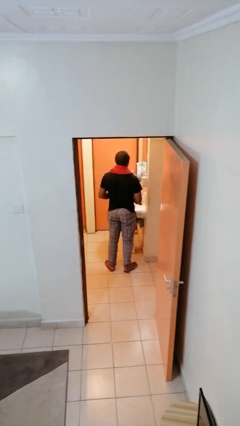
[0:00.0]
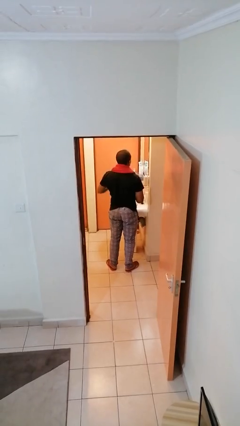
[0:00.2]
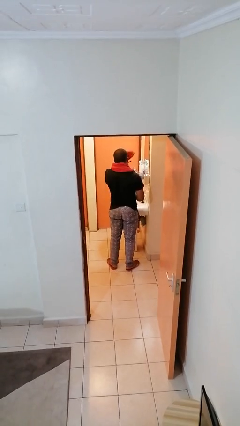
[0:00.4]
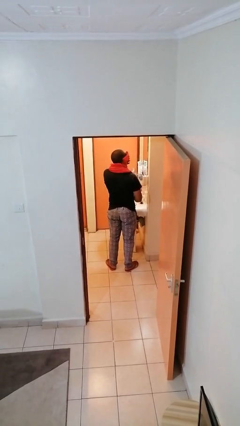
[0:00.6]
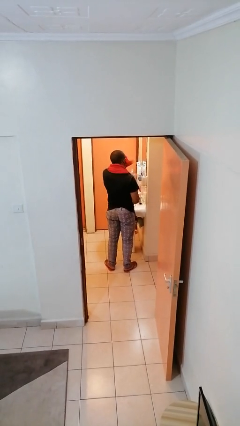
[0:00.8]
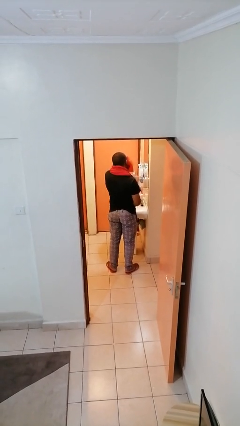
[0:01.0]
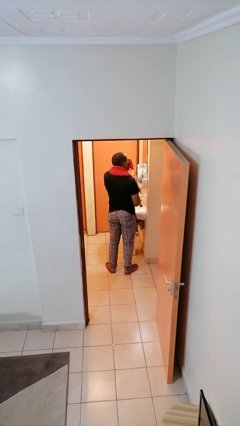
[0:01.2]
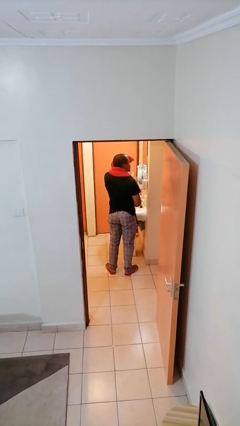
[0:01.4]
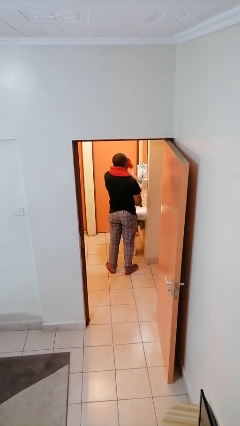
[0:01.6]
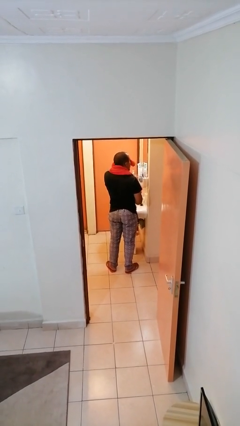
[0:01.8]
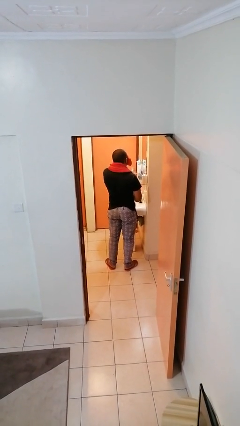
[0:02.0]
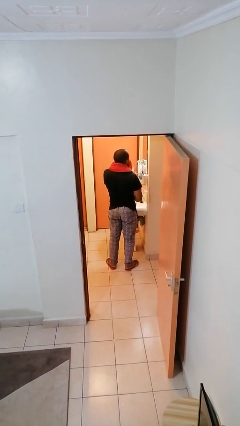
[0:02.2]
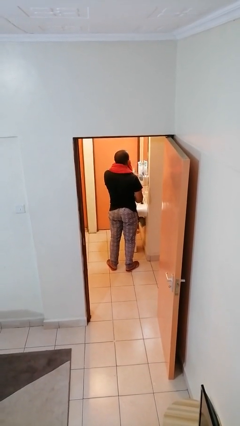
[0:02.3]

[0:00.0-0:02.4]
person dries face with towel

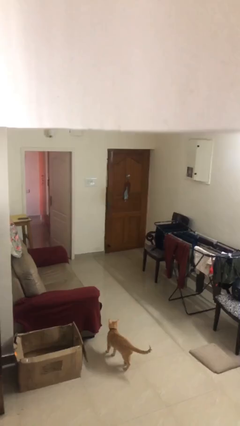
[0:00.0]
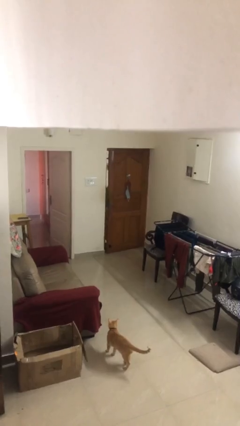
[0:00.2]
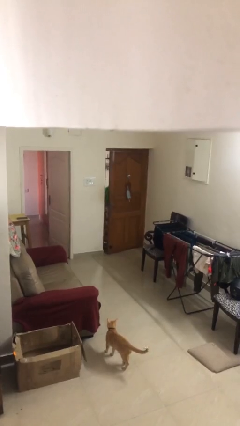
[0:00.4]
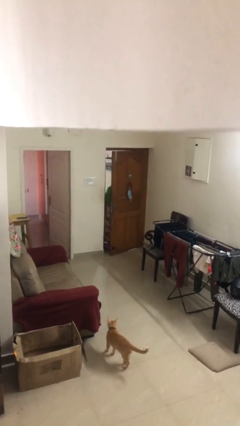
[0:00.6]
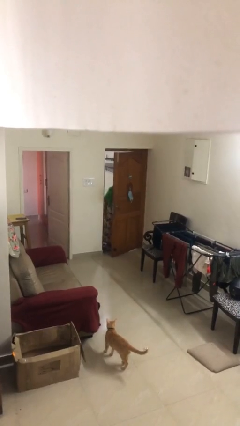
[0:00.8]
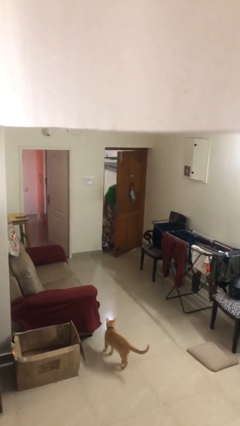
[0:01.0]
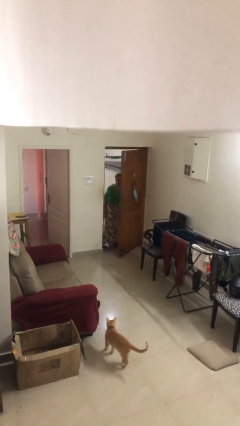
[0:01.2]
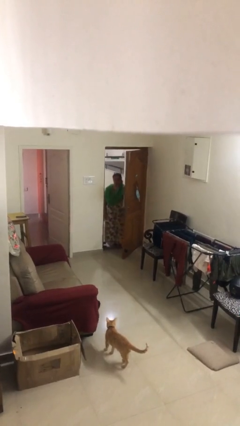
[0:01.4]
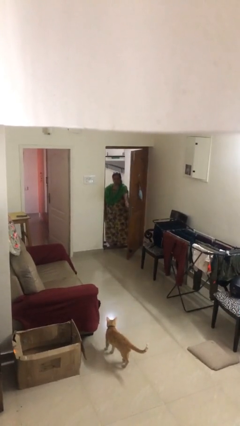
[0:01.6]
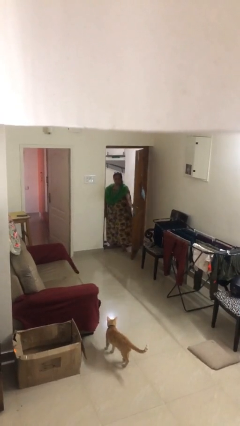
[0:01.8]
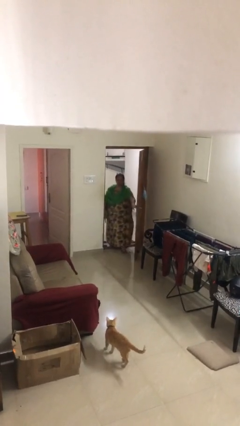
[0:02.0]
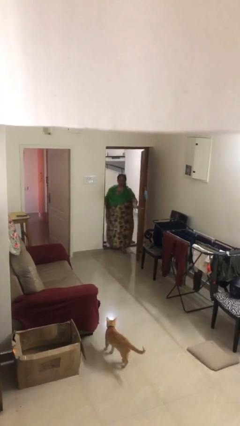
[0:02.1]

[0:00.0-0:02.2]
person opens facility door

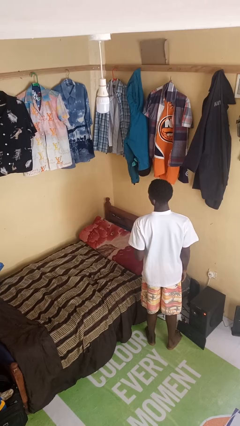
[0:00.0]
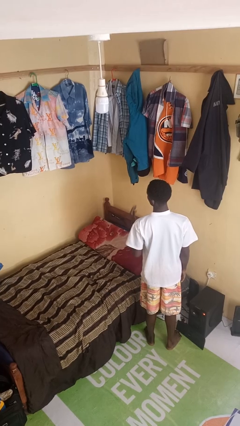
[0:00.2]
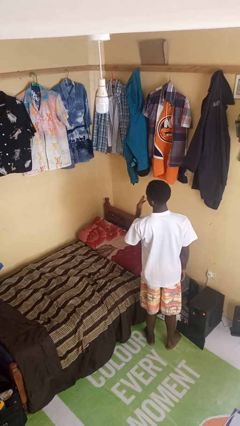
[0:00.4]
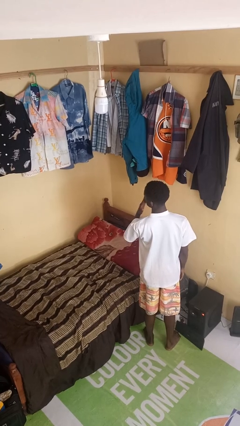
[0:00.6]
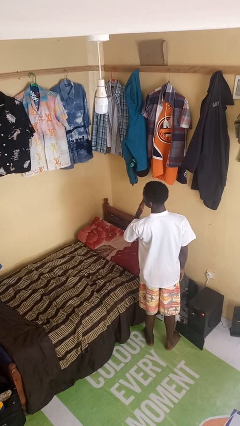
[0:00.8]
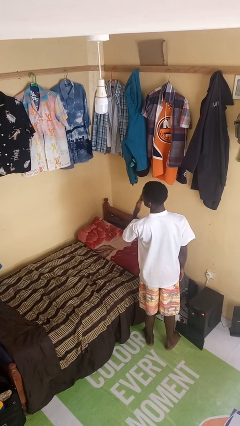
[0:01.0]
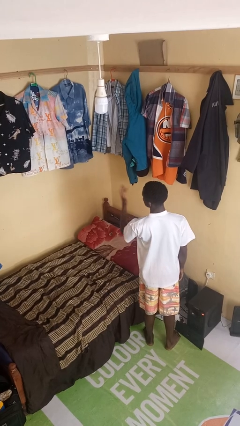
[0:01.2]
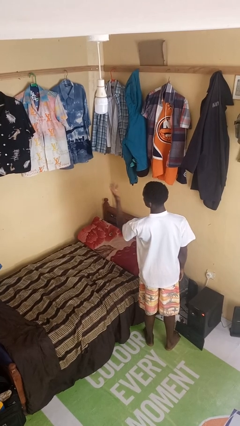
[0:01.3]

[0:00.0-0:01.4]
person gestures blow kiss

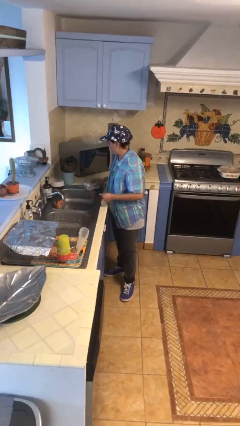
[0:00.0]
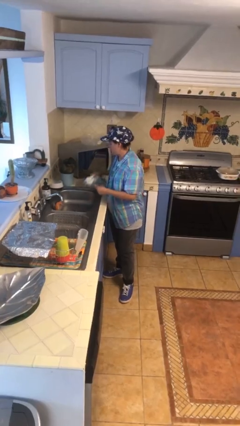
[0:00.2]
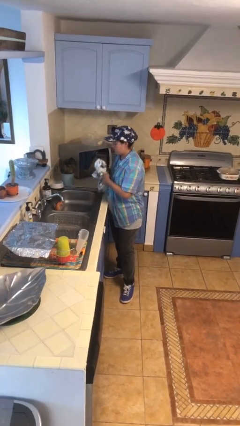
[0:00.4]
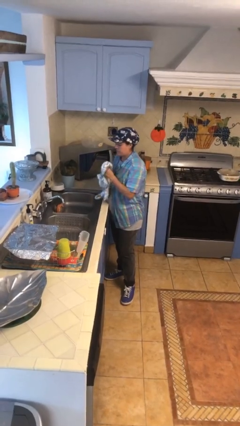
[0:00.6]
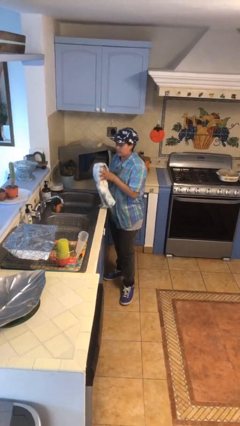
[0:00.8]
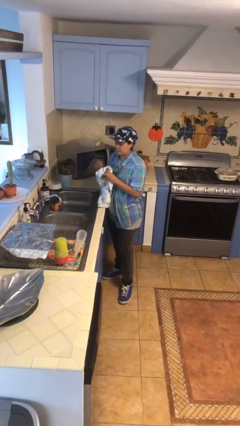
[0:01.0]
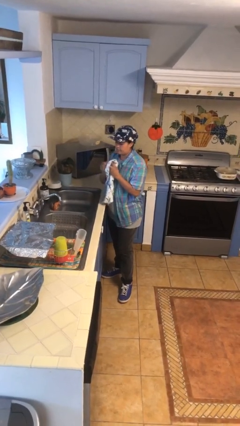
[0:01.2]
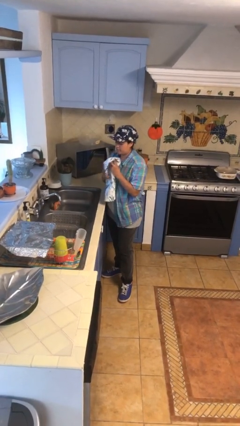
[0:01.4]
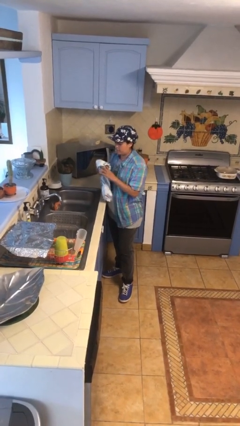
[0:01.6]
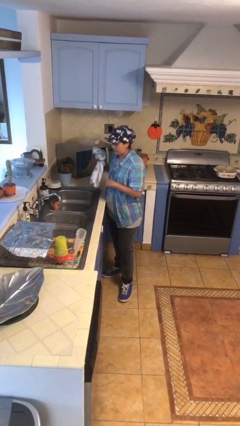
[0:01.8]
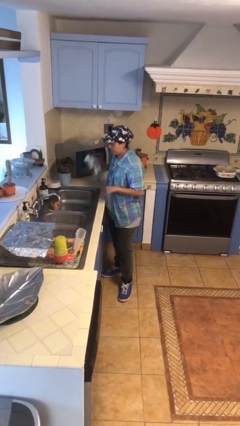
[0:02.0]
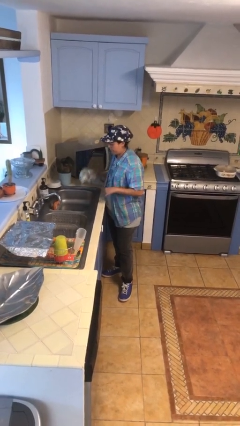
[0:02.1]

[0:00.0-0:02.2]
person dries hands with towel

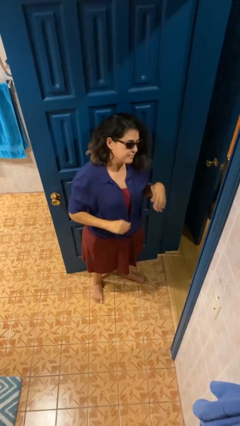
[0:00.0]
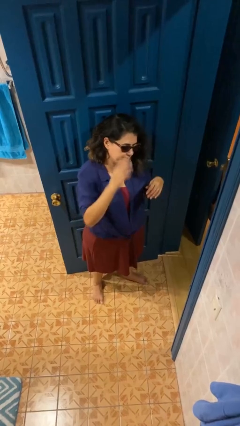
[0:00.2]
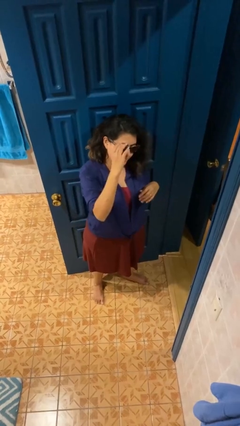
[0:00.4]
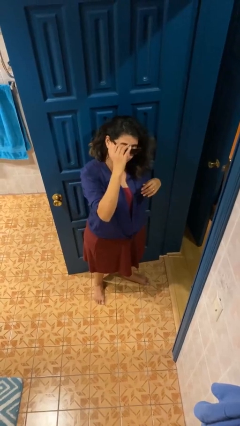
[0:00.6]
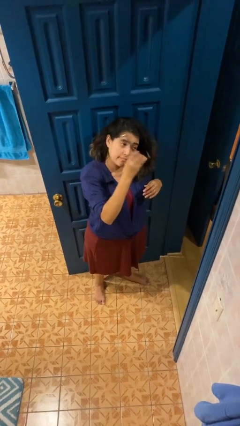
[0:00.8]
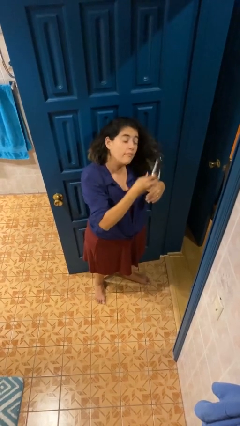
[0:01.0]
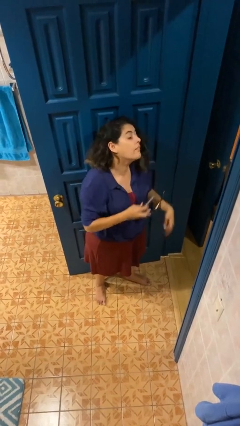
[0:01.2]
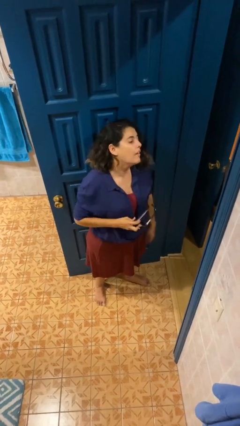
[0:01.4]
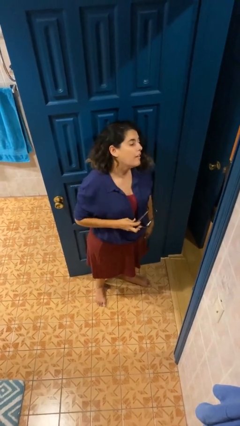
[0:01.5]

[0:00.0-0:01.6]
person takes off sunglasses

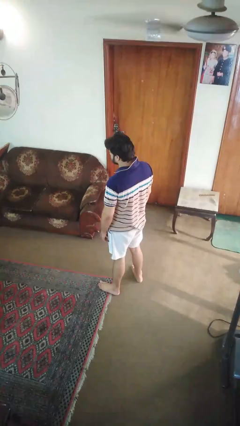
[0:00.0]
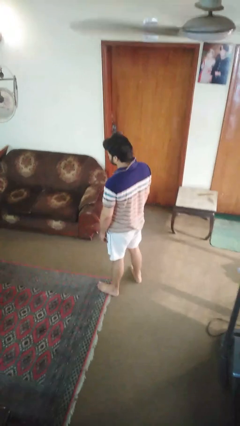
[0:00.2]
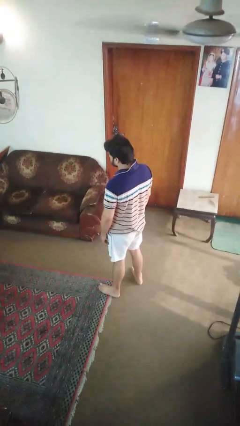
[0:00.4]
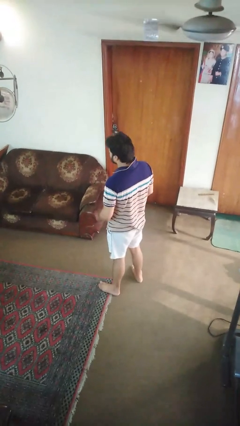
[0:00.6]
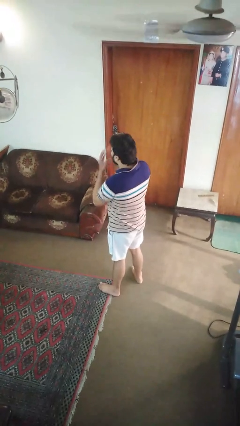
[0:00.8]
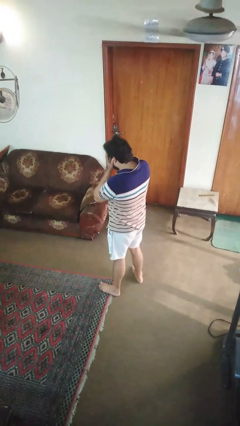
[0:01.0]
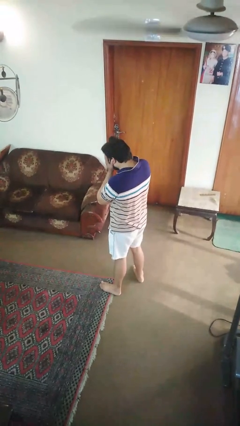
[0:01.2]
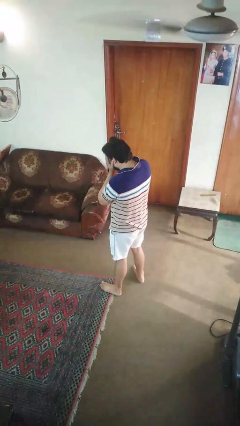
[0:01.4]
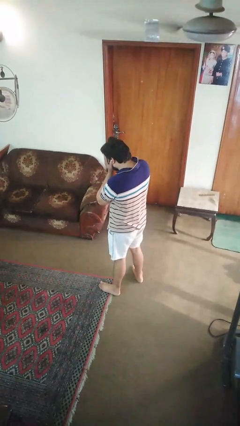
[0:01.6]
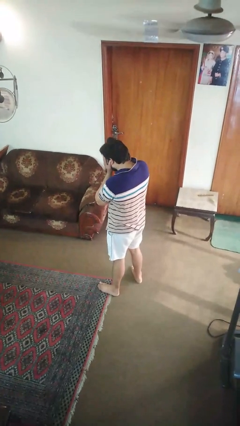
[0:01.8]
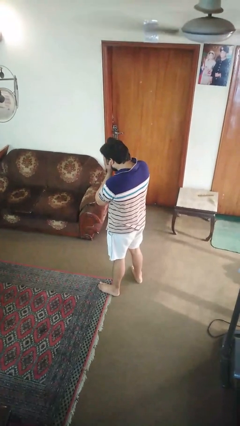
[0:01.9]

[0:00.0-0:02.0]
person sneezes into hand

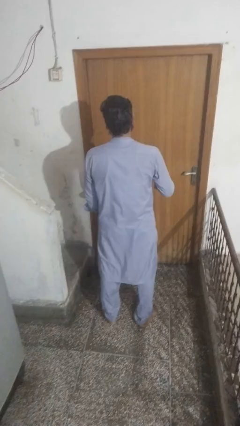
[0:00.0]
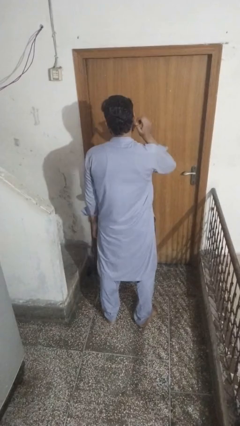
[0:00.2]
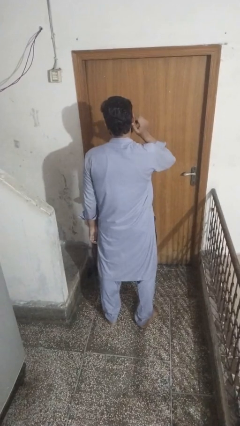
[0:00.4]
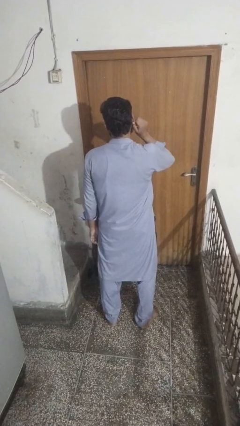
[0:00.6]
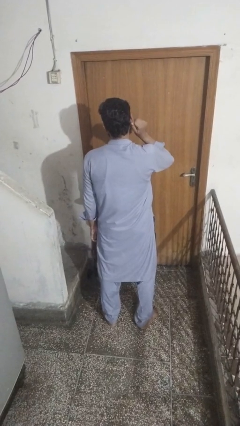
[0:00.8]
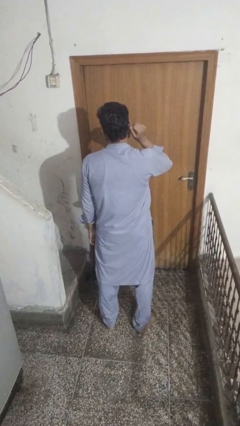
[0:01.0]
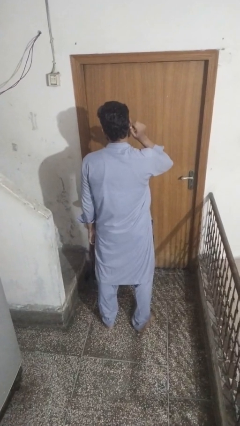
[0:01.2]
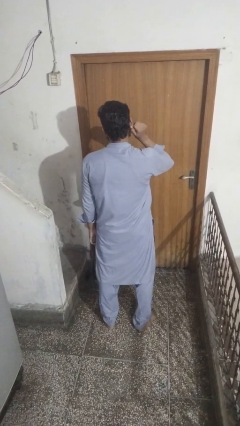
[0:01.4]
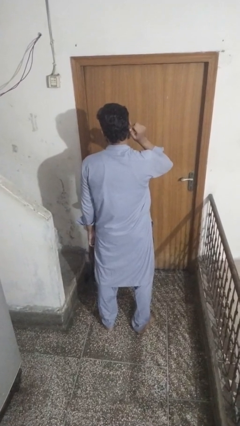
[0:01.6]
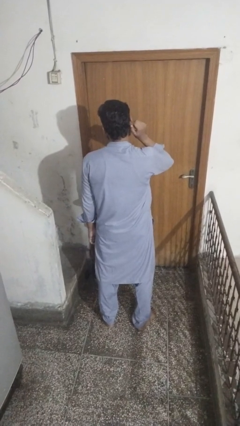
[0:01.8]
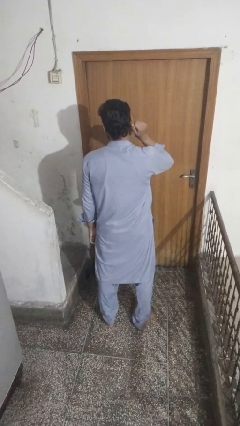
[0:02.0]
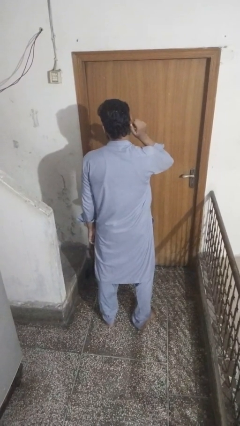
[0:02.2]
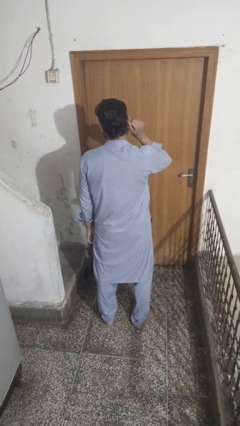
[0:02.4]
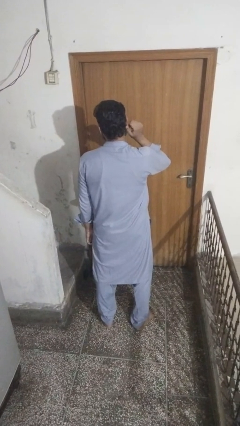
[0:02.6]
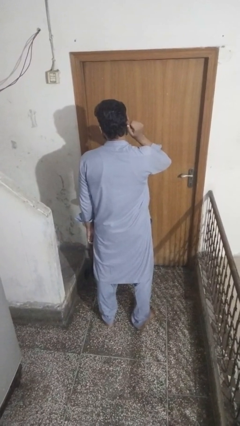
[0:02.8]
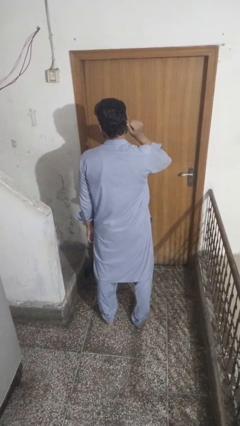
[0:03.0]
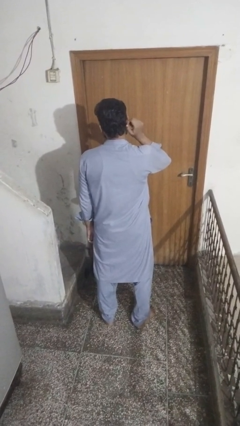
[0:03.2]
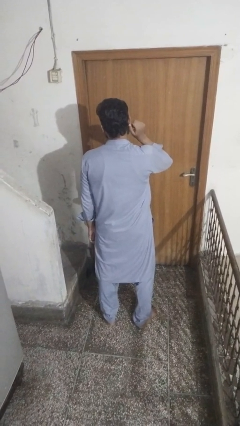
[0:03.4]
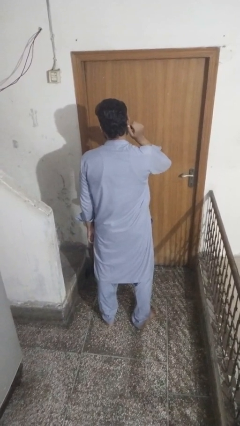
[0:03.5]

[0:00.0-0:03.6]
person touches earlobe

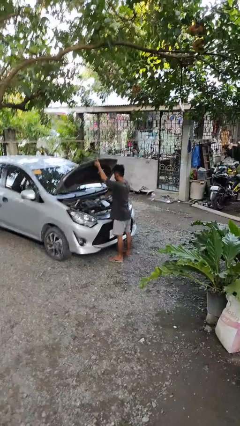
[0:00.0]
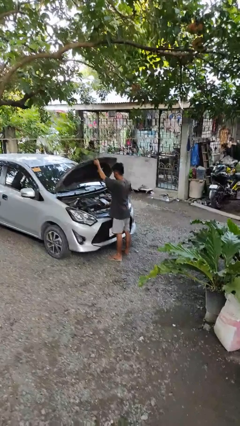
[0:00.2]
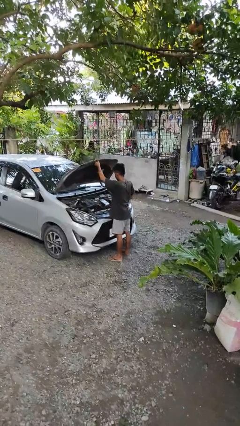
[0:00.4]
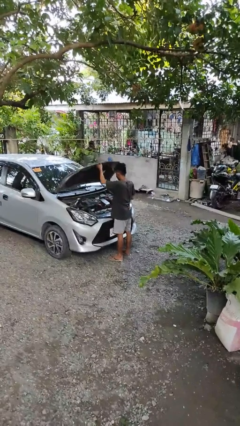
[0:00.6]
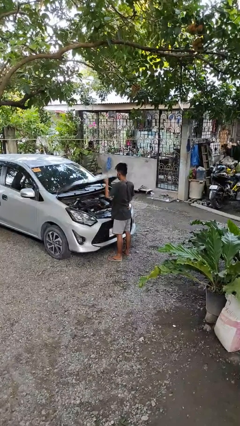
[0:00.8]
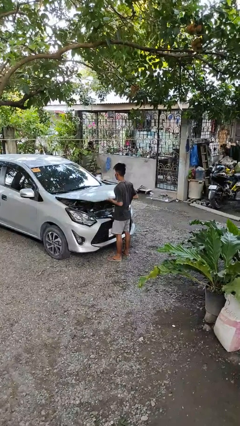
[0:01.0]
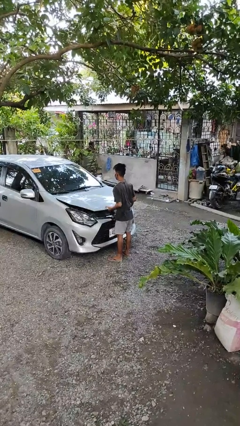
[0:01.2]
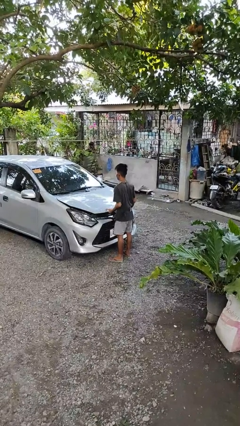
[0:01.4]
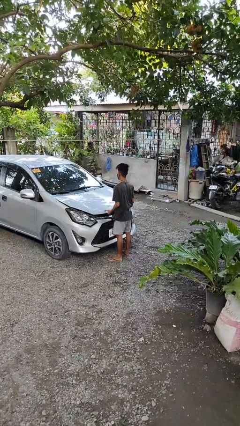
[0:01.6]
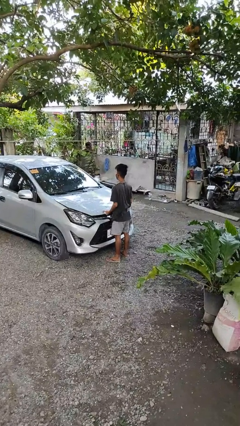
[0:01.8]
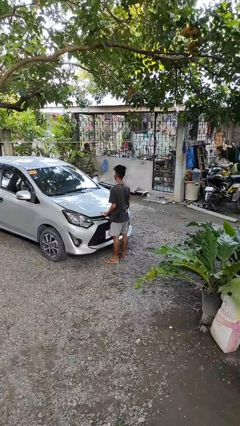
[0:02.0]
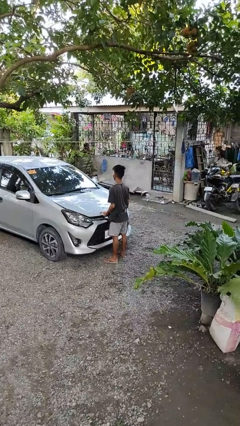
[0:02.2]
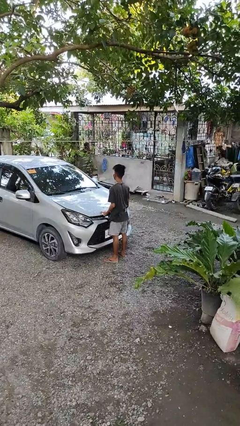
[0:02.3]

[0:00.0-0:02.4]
person closes car hood
